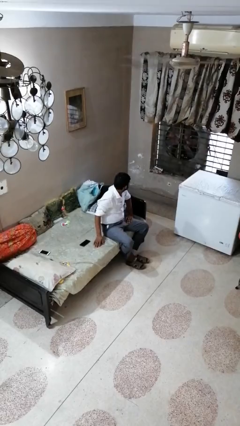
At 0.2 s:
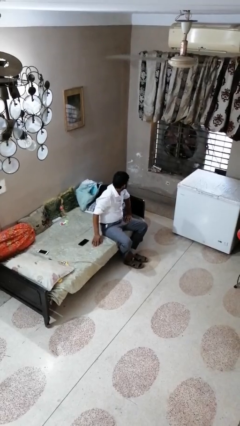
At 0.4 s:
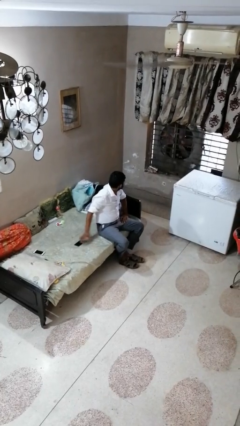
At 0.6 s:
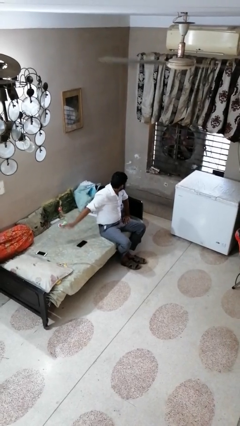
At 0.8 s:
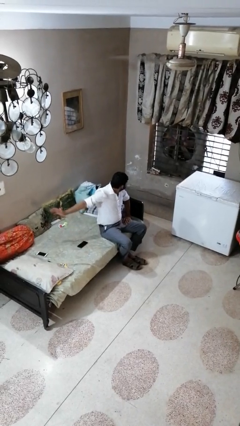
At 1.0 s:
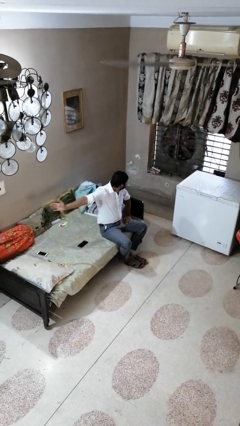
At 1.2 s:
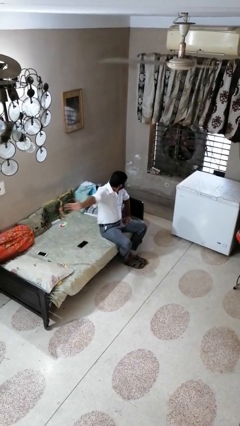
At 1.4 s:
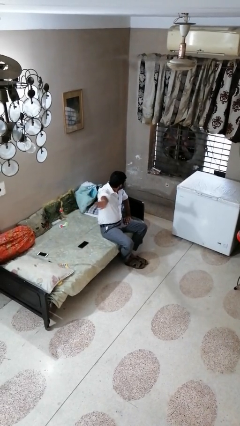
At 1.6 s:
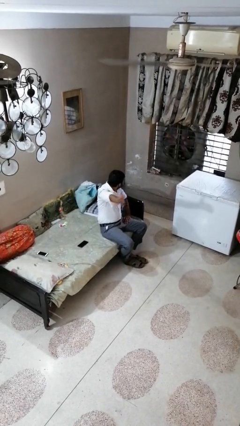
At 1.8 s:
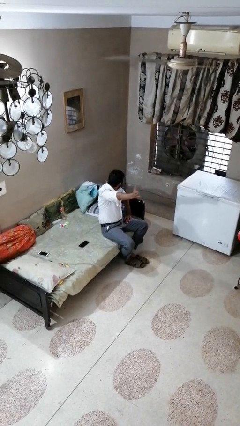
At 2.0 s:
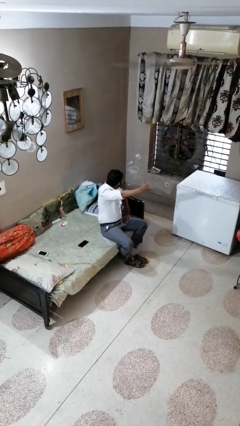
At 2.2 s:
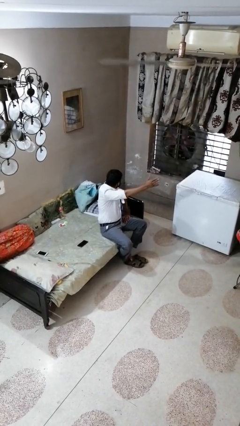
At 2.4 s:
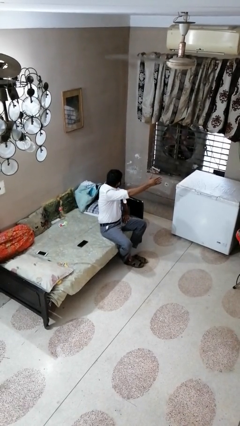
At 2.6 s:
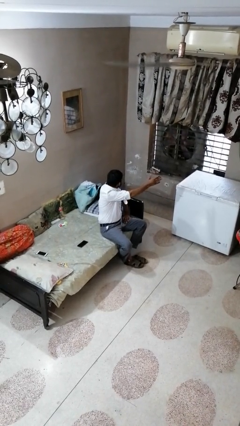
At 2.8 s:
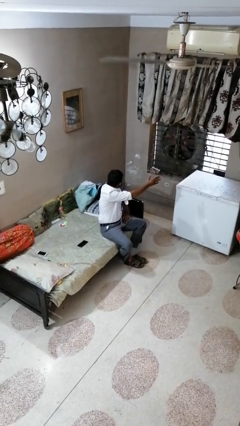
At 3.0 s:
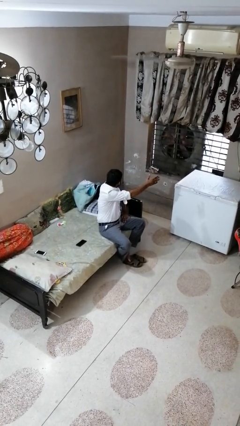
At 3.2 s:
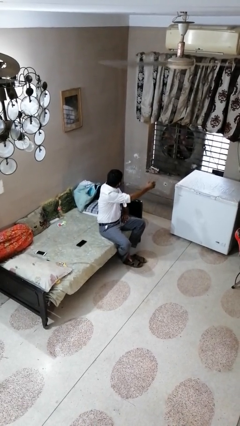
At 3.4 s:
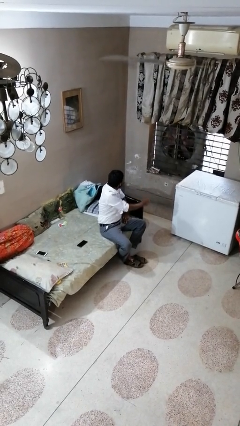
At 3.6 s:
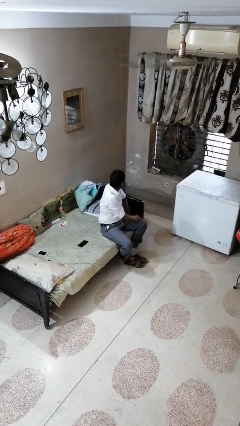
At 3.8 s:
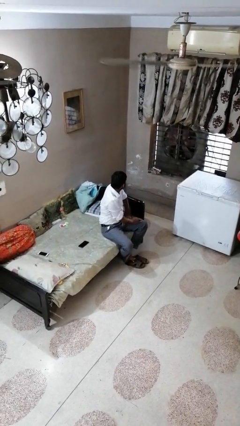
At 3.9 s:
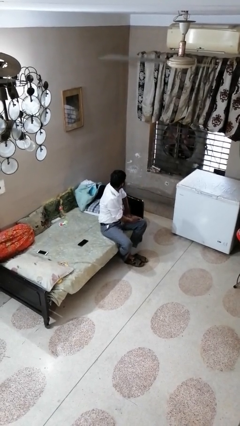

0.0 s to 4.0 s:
person gestures swipe left

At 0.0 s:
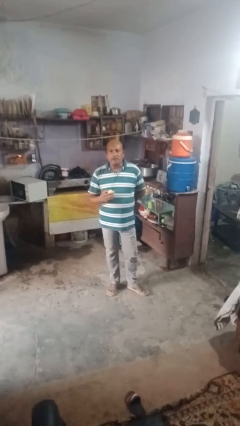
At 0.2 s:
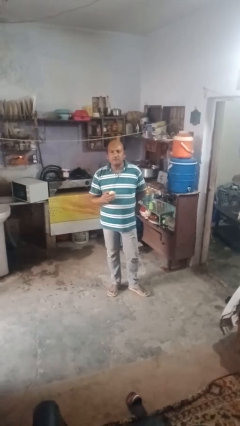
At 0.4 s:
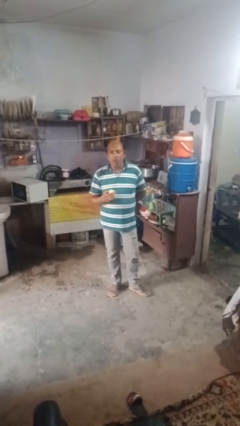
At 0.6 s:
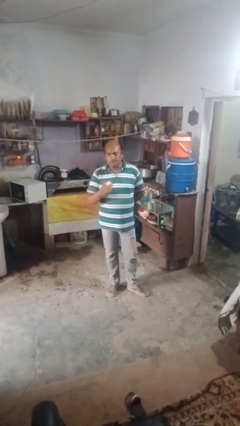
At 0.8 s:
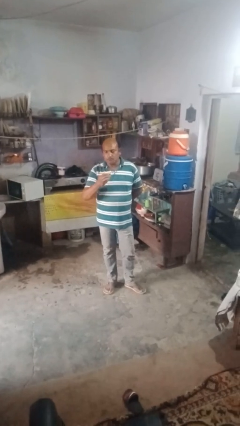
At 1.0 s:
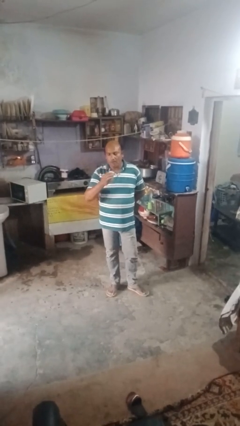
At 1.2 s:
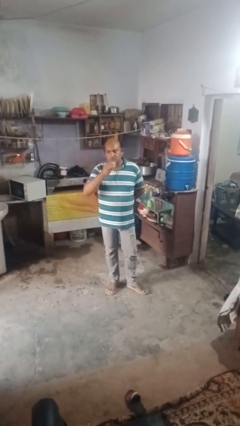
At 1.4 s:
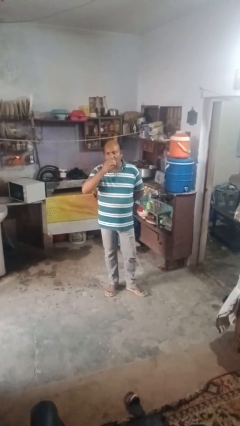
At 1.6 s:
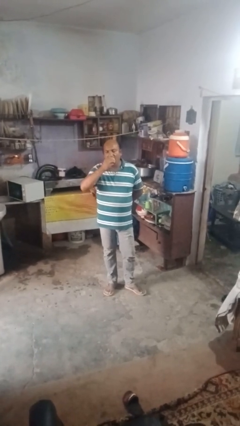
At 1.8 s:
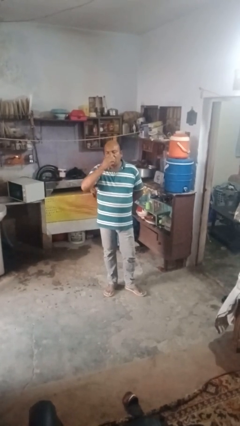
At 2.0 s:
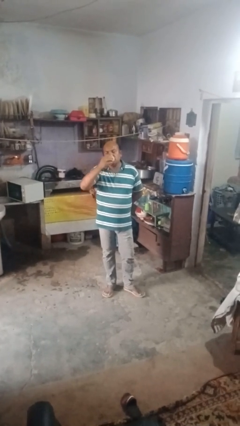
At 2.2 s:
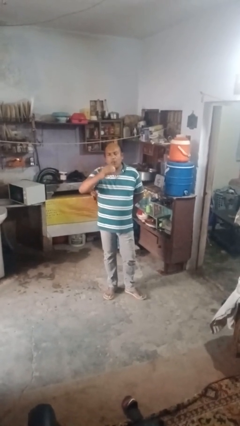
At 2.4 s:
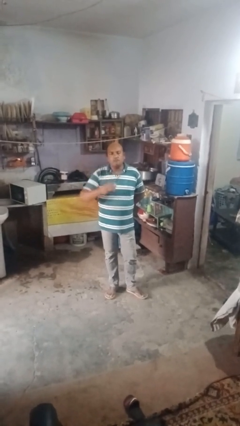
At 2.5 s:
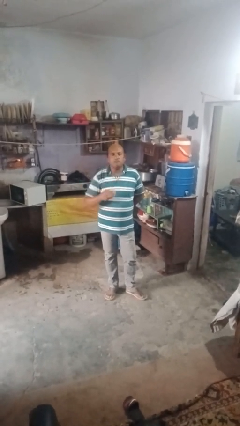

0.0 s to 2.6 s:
person eats apple

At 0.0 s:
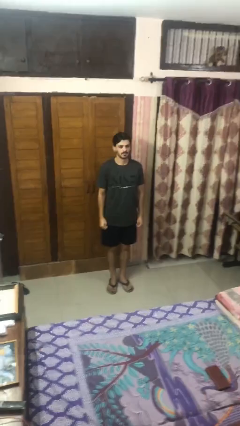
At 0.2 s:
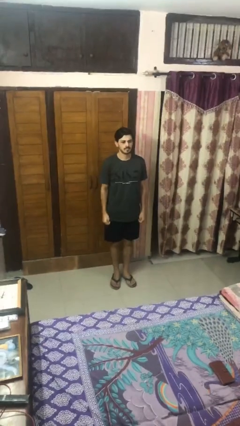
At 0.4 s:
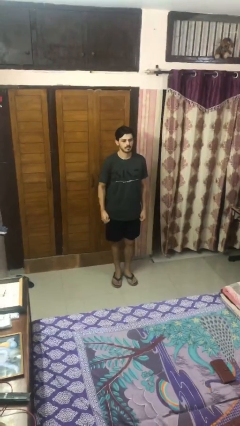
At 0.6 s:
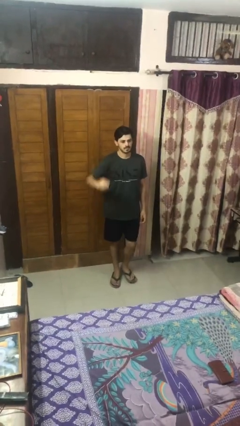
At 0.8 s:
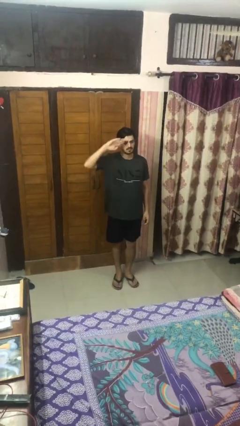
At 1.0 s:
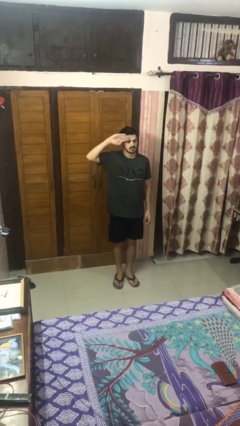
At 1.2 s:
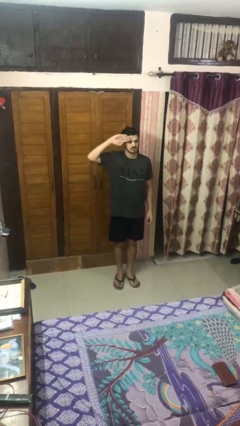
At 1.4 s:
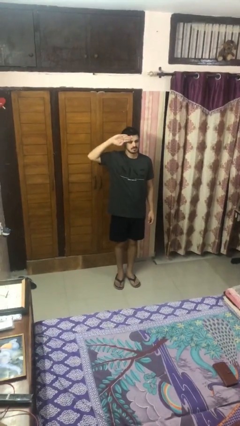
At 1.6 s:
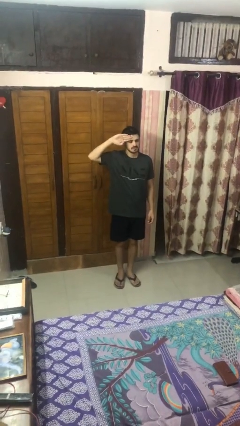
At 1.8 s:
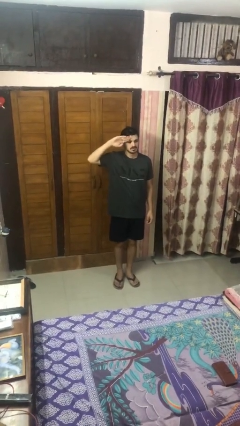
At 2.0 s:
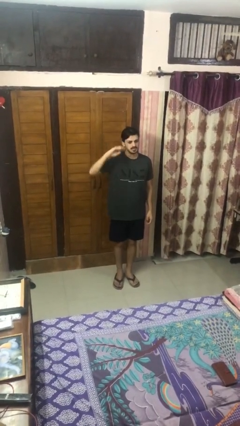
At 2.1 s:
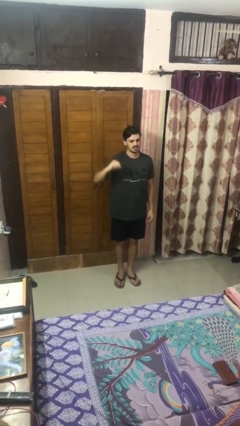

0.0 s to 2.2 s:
person salutes

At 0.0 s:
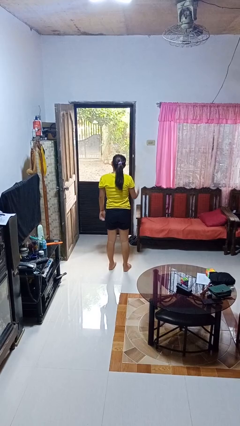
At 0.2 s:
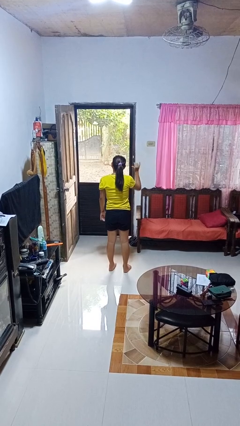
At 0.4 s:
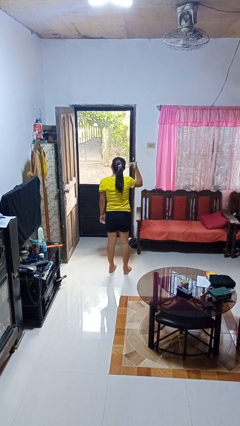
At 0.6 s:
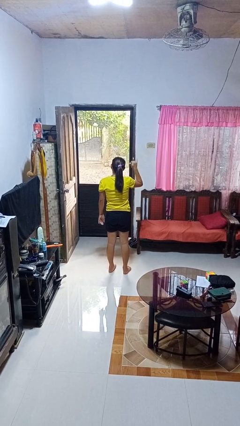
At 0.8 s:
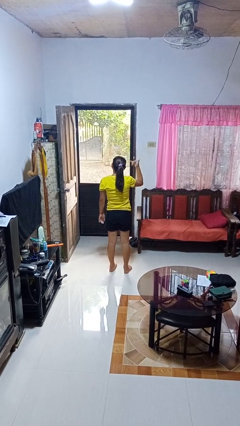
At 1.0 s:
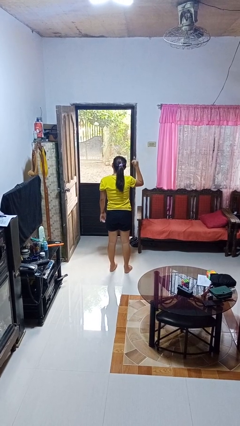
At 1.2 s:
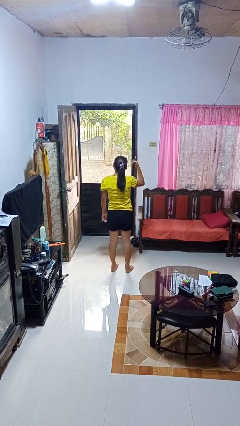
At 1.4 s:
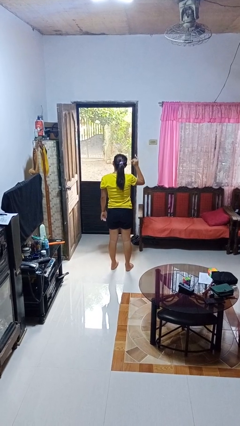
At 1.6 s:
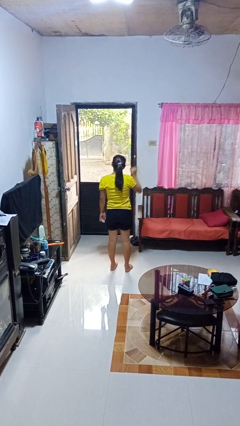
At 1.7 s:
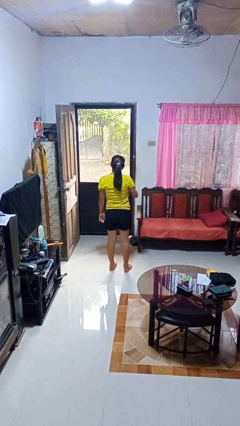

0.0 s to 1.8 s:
person gestures hang loose

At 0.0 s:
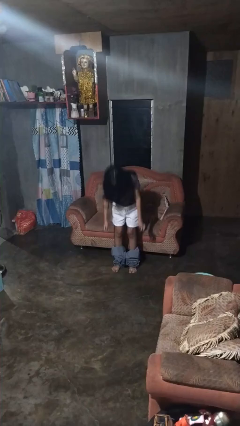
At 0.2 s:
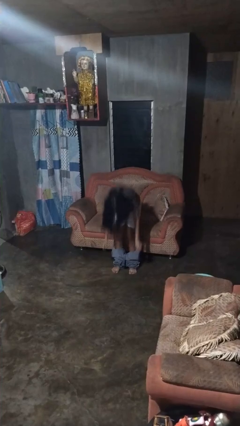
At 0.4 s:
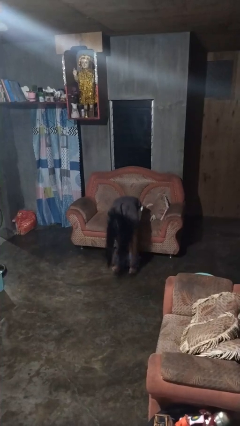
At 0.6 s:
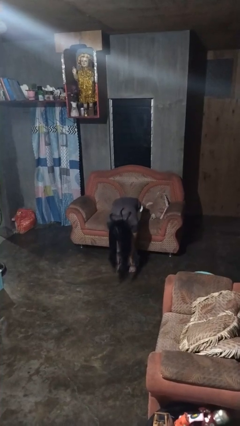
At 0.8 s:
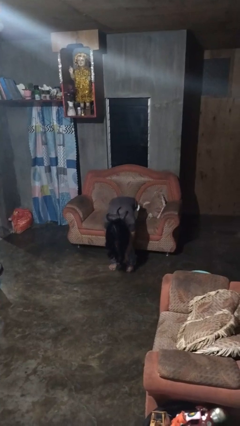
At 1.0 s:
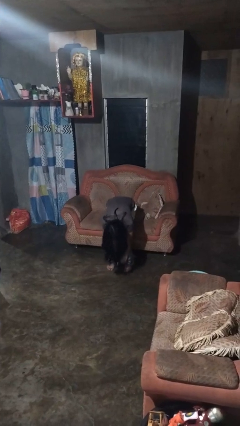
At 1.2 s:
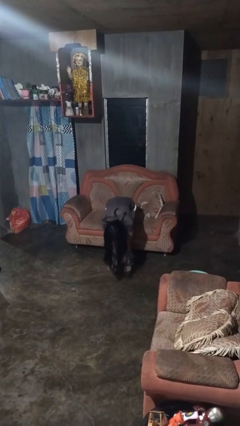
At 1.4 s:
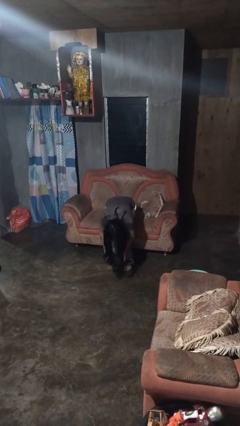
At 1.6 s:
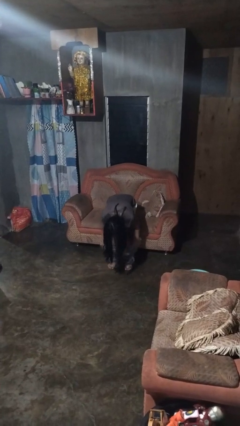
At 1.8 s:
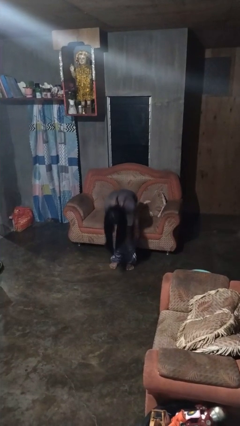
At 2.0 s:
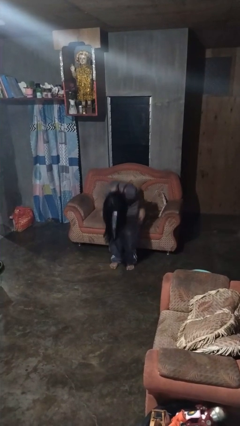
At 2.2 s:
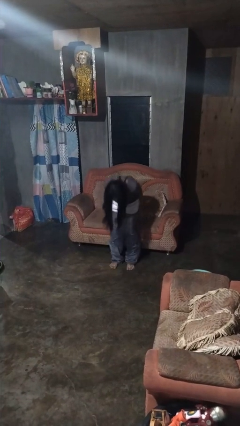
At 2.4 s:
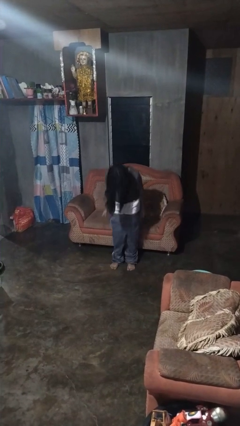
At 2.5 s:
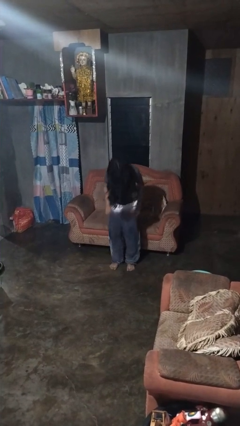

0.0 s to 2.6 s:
person puts on pants

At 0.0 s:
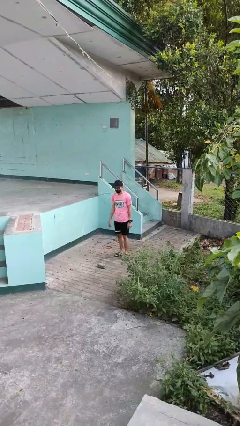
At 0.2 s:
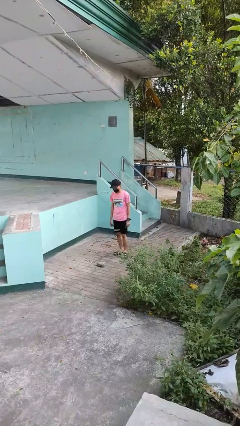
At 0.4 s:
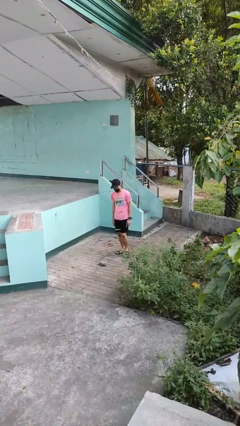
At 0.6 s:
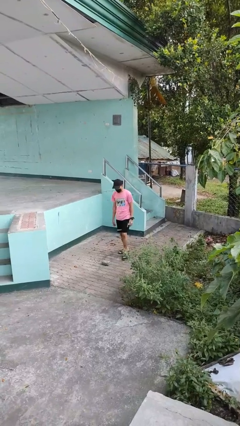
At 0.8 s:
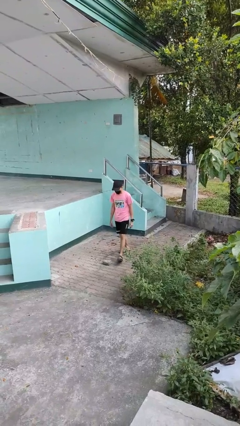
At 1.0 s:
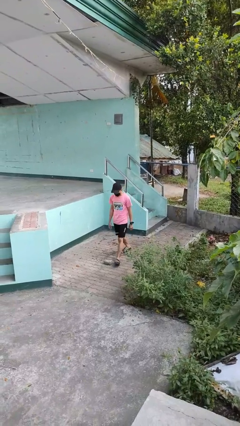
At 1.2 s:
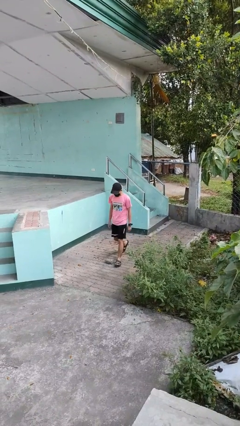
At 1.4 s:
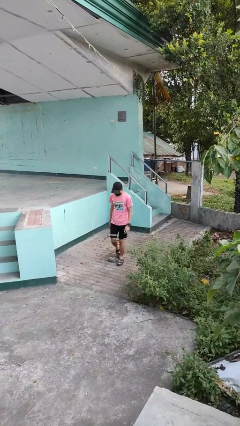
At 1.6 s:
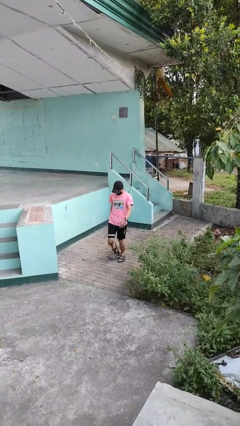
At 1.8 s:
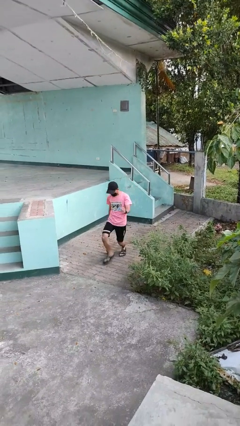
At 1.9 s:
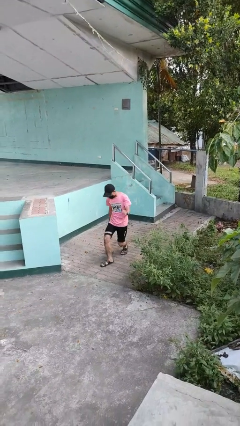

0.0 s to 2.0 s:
person trips on object on floor

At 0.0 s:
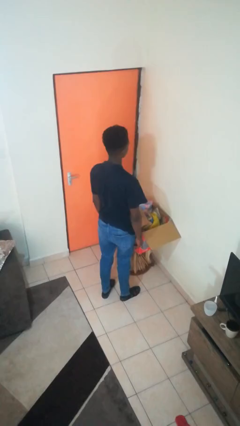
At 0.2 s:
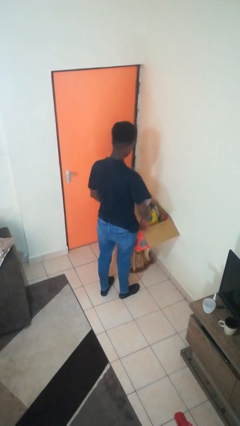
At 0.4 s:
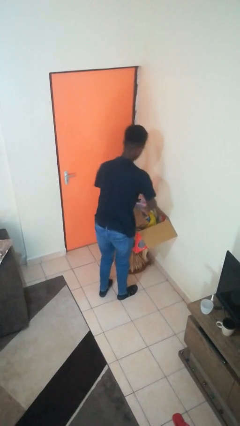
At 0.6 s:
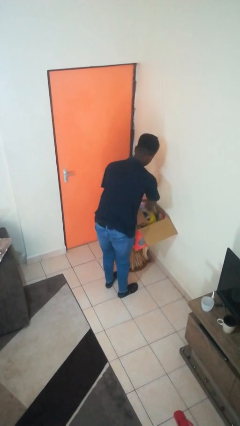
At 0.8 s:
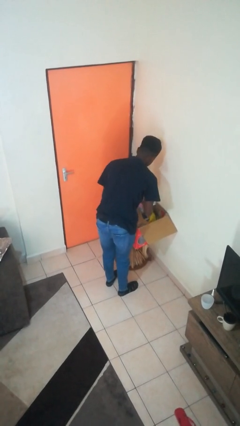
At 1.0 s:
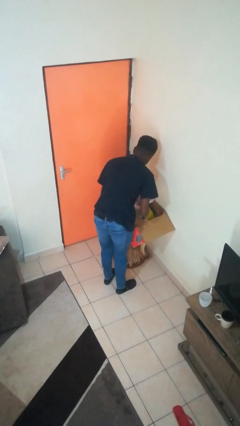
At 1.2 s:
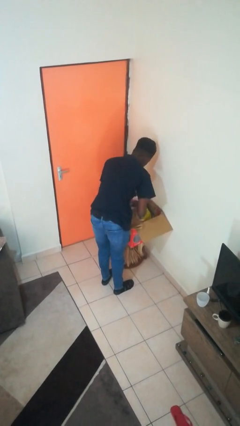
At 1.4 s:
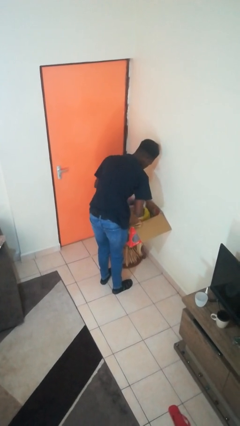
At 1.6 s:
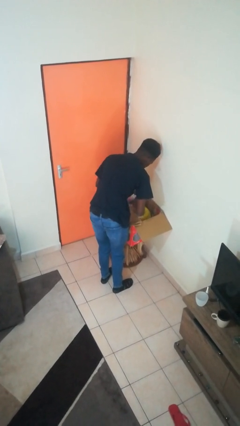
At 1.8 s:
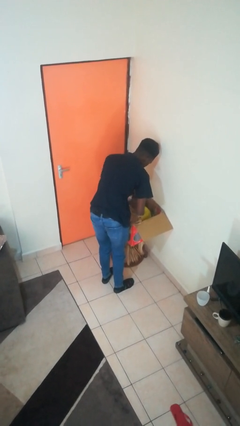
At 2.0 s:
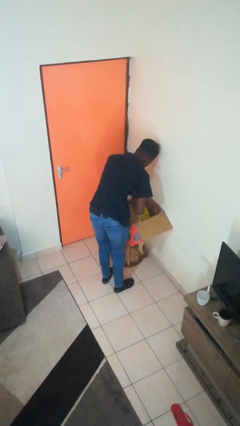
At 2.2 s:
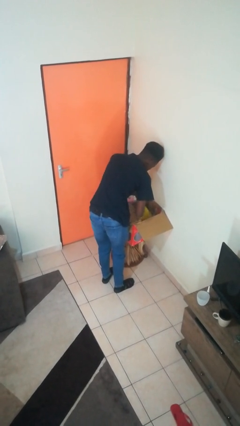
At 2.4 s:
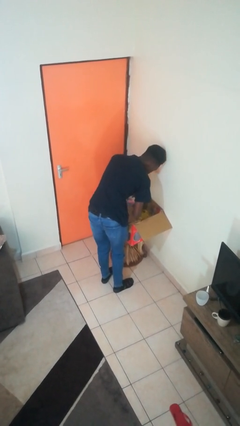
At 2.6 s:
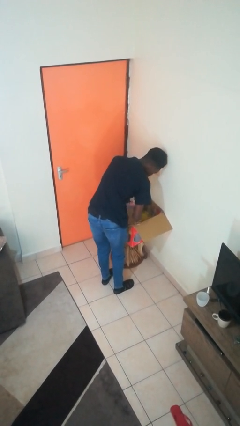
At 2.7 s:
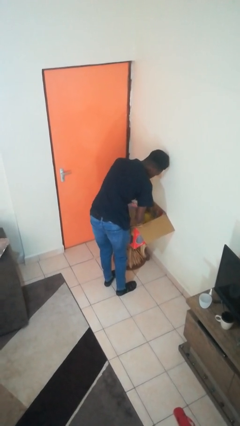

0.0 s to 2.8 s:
person searches in box
